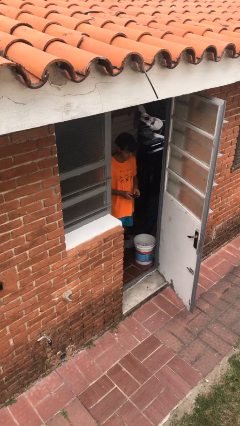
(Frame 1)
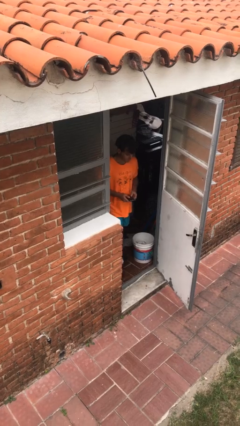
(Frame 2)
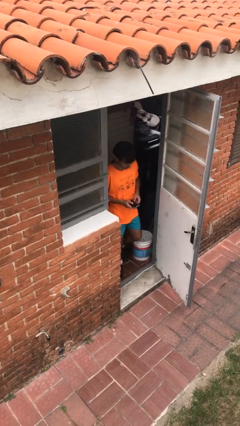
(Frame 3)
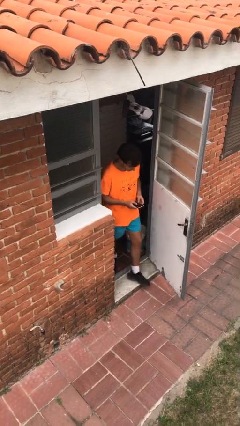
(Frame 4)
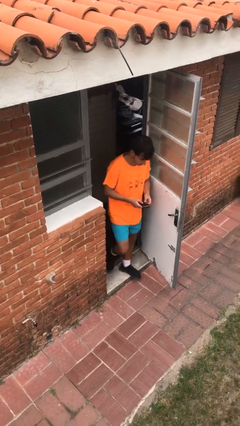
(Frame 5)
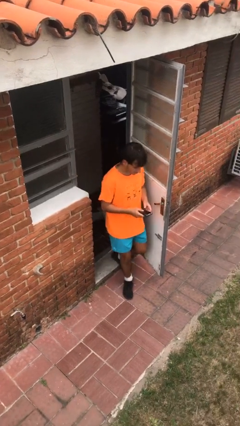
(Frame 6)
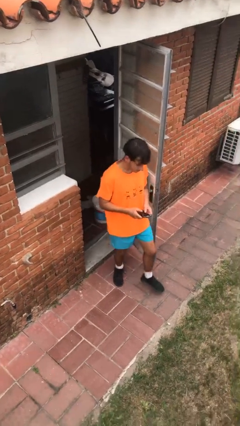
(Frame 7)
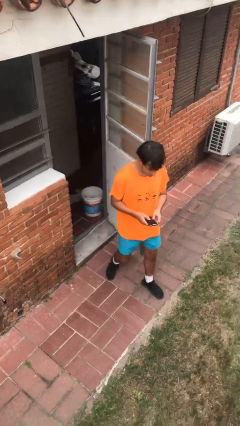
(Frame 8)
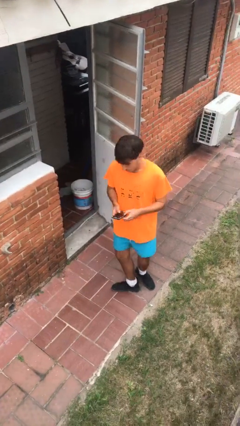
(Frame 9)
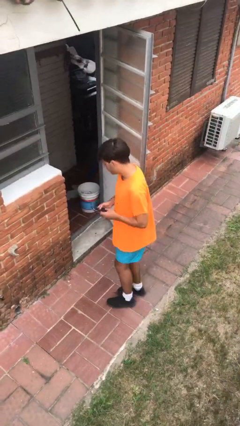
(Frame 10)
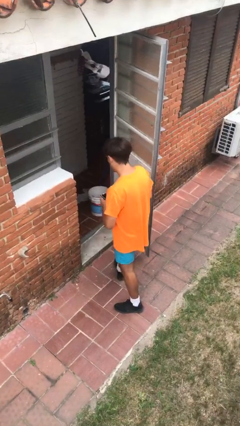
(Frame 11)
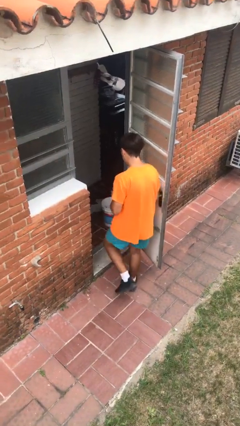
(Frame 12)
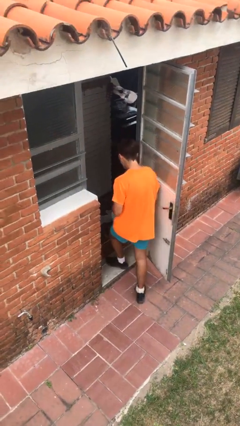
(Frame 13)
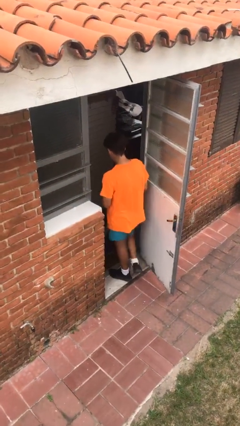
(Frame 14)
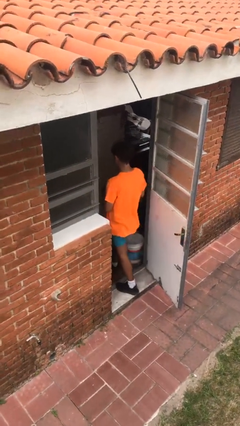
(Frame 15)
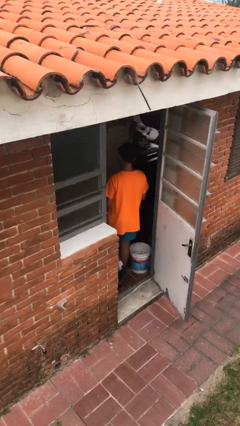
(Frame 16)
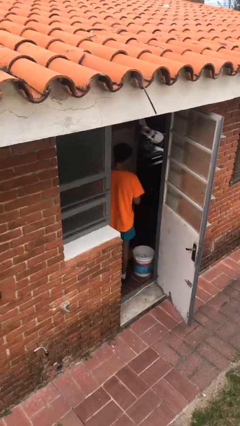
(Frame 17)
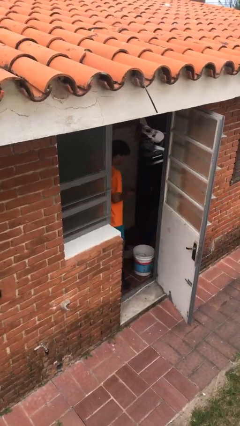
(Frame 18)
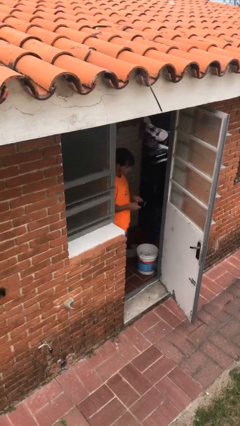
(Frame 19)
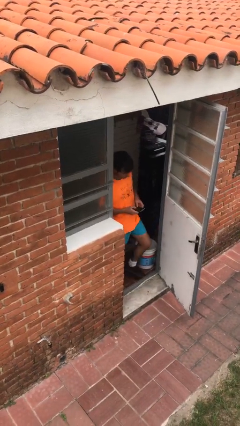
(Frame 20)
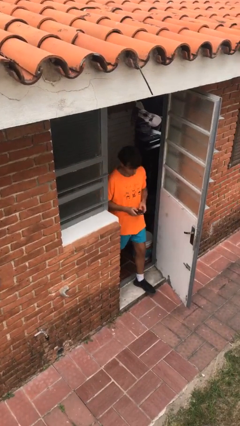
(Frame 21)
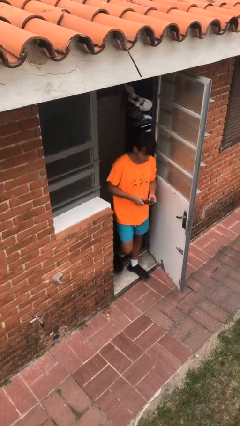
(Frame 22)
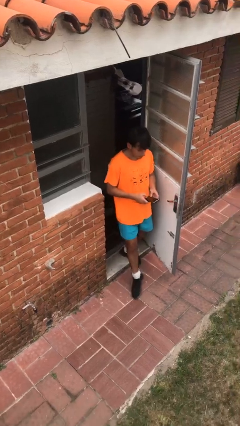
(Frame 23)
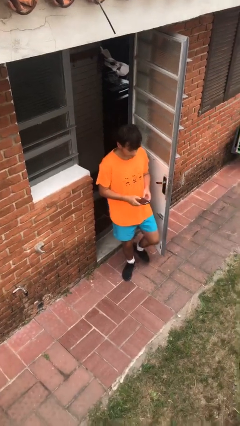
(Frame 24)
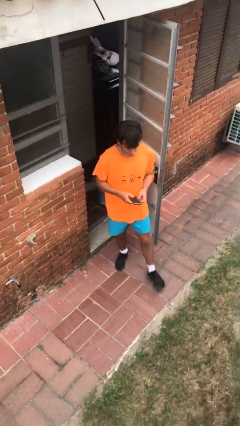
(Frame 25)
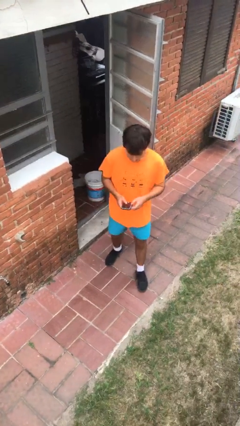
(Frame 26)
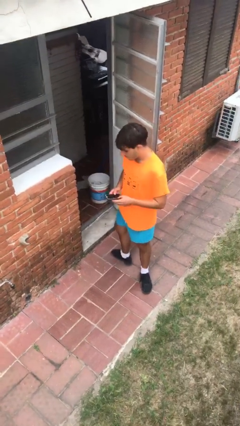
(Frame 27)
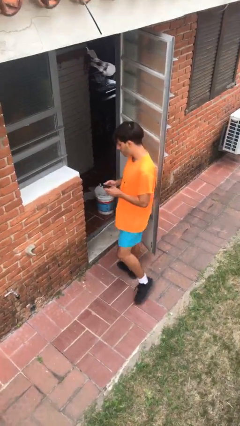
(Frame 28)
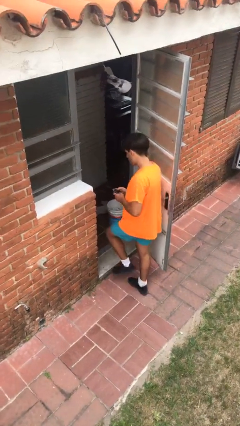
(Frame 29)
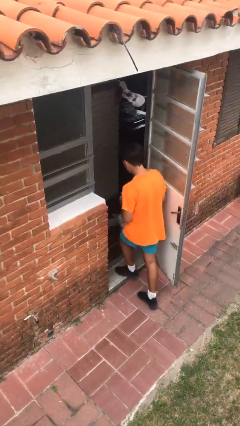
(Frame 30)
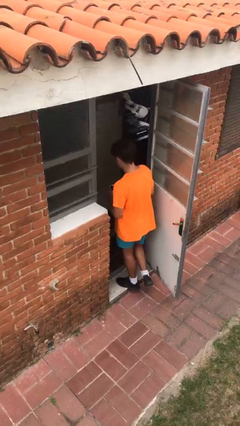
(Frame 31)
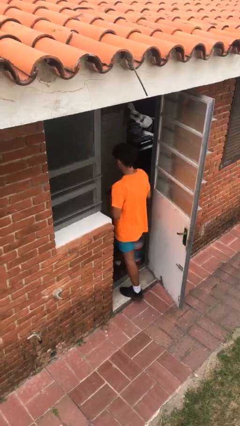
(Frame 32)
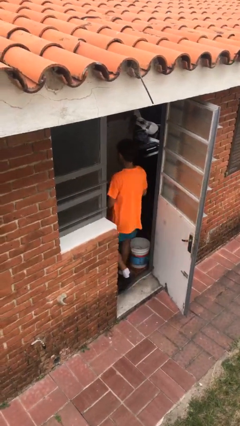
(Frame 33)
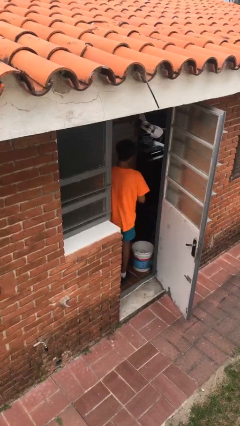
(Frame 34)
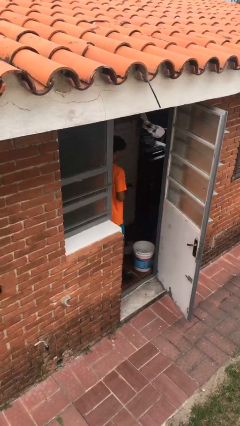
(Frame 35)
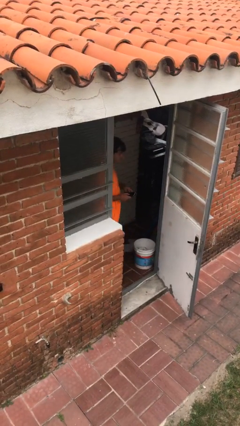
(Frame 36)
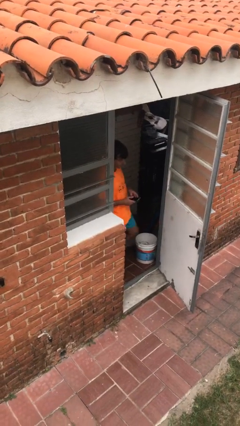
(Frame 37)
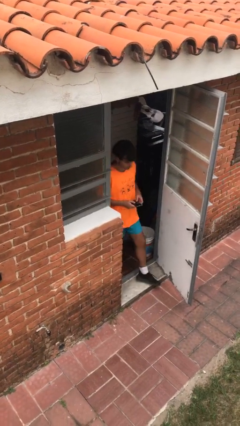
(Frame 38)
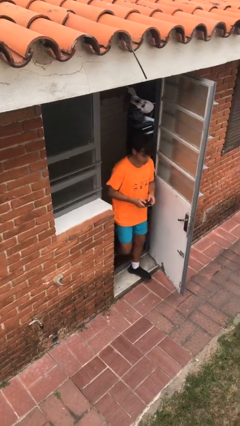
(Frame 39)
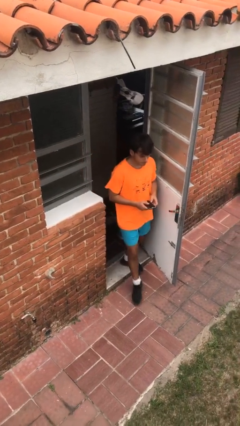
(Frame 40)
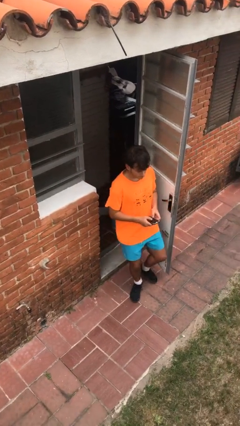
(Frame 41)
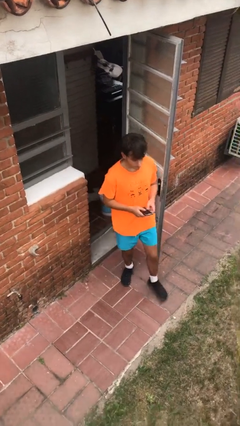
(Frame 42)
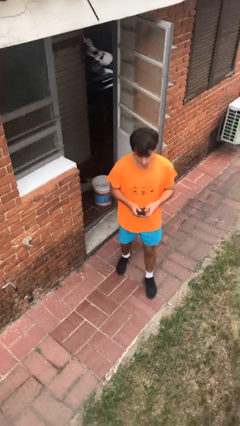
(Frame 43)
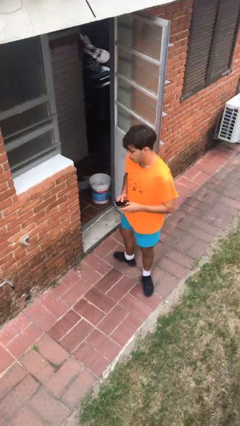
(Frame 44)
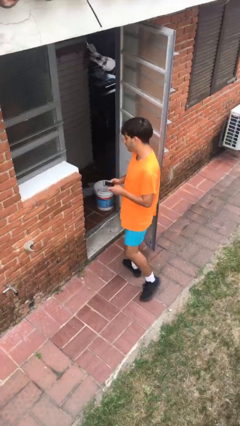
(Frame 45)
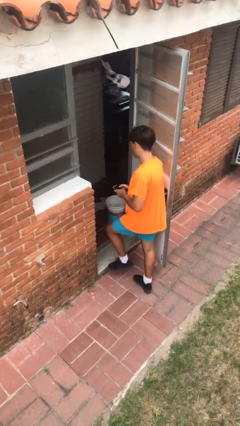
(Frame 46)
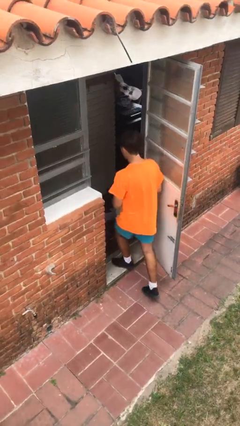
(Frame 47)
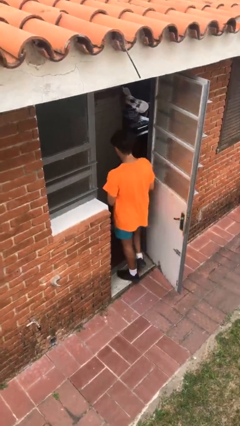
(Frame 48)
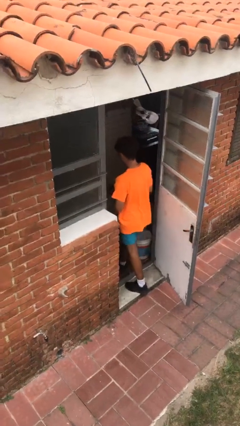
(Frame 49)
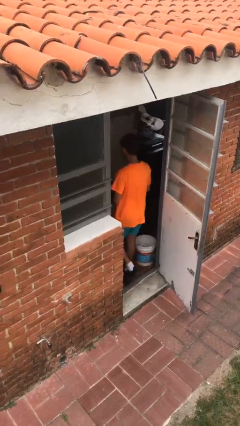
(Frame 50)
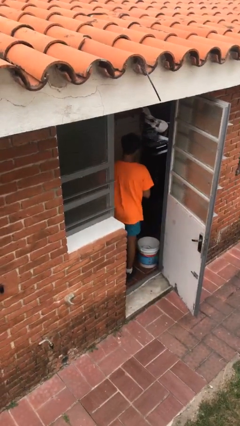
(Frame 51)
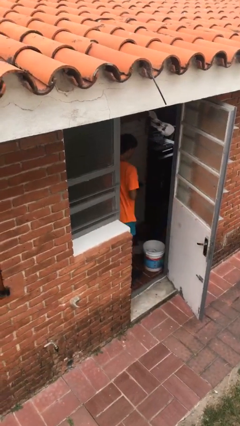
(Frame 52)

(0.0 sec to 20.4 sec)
person texts on phone

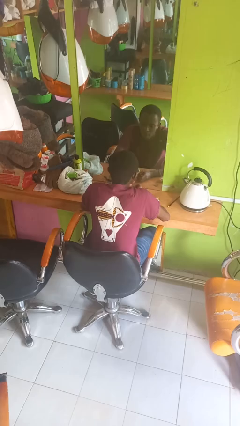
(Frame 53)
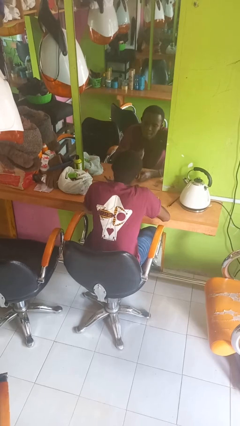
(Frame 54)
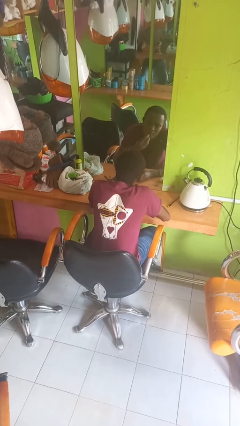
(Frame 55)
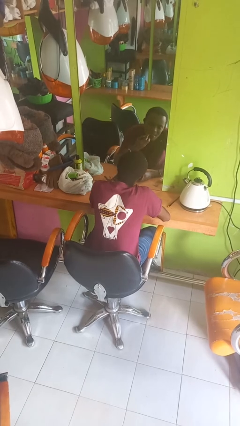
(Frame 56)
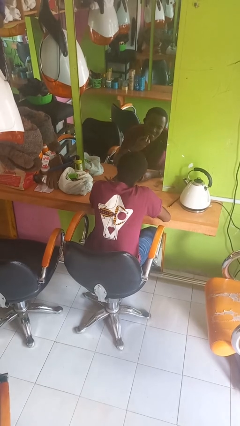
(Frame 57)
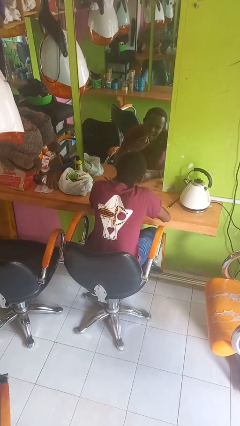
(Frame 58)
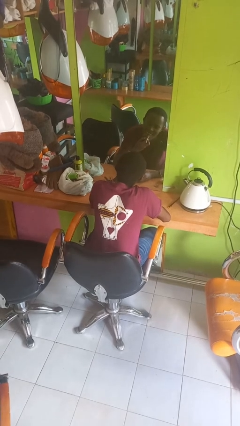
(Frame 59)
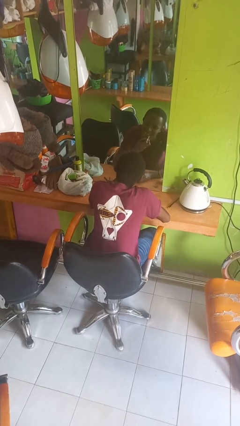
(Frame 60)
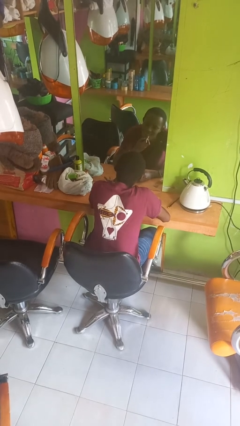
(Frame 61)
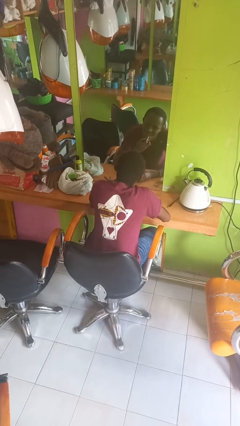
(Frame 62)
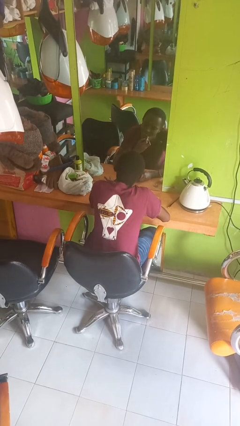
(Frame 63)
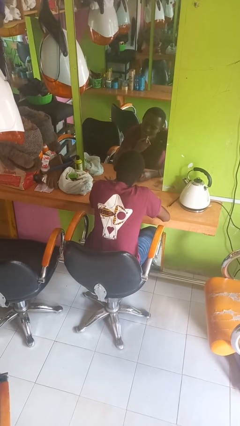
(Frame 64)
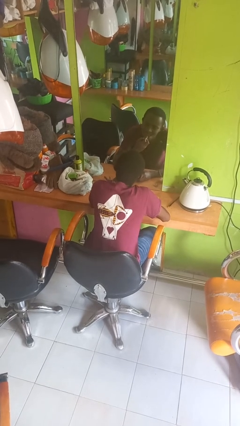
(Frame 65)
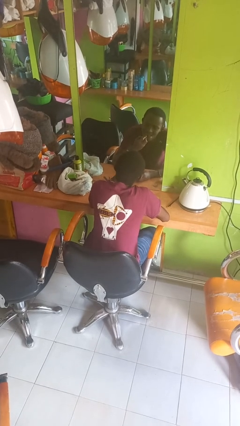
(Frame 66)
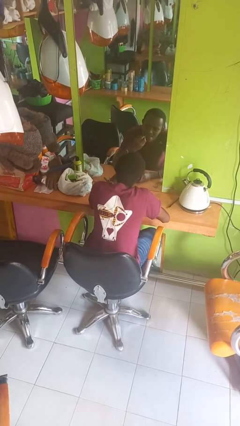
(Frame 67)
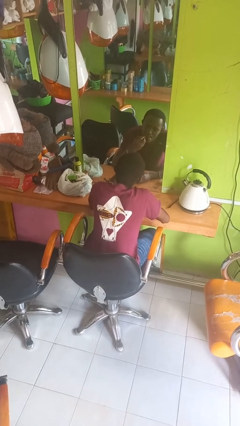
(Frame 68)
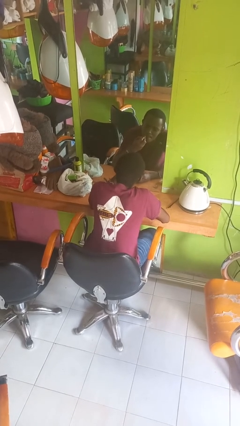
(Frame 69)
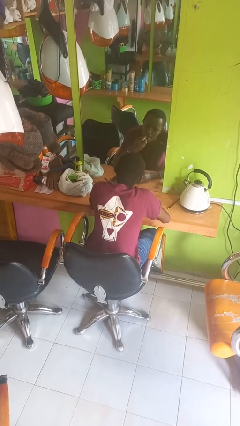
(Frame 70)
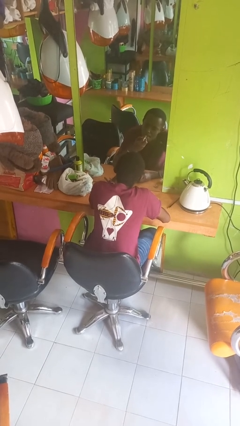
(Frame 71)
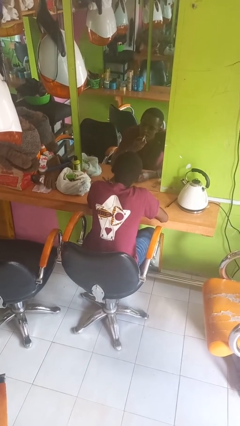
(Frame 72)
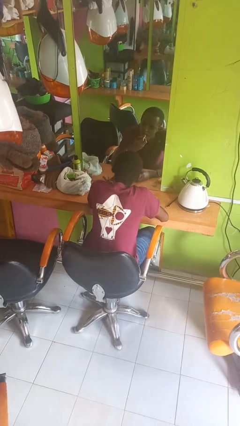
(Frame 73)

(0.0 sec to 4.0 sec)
person applies lip makeup

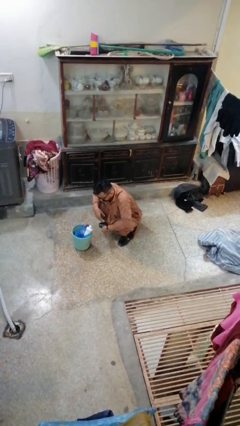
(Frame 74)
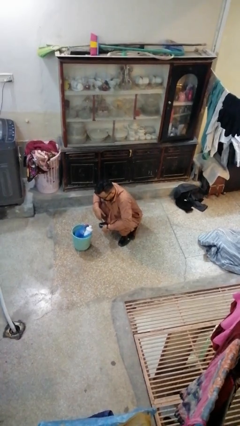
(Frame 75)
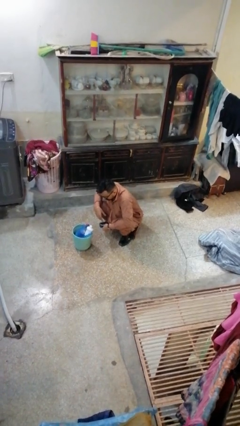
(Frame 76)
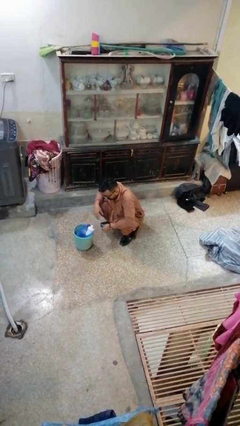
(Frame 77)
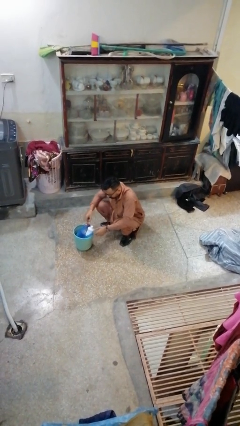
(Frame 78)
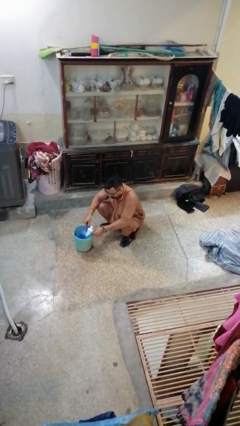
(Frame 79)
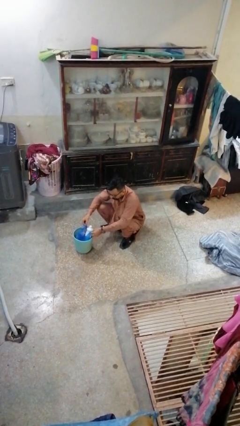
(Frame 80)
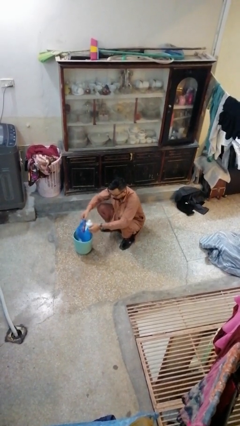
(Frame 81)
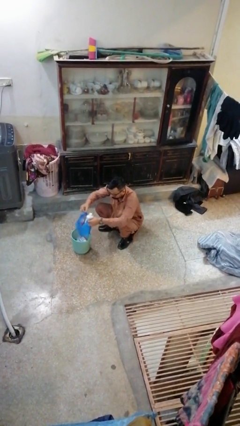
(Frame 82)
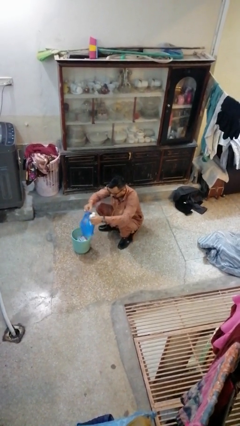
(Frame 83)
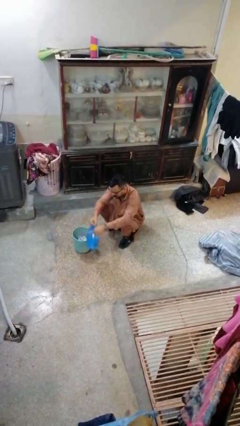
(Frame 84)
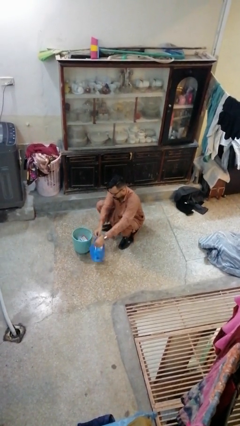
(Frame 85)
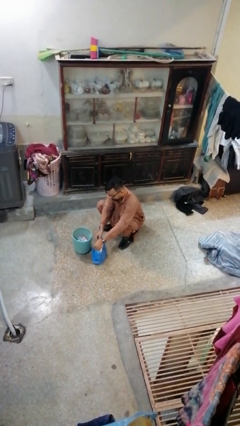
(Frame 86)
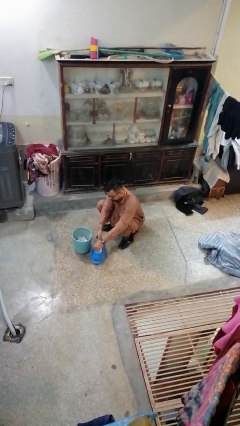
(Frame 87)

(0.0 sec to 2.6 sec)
person removes trashbag from trashcan

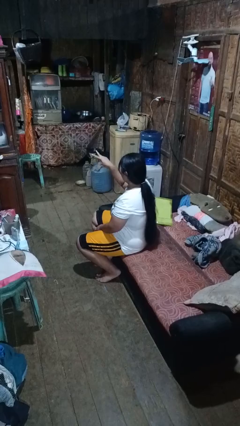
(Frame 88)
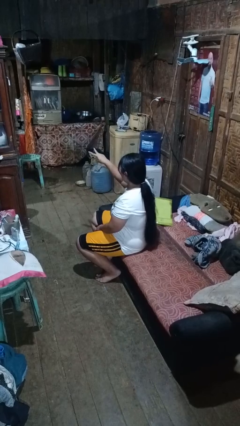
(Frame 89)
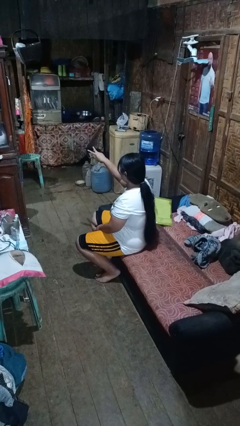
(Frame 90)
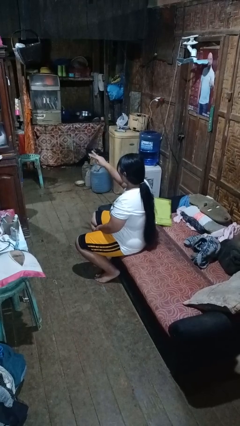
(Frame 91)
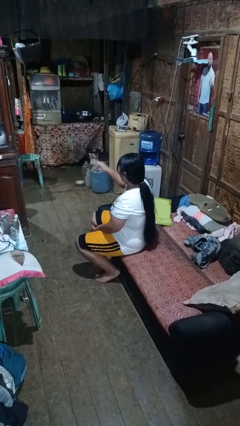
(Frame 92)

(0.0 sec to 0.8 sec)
person gestures watch closely
